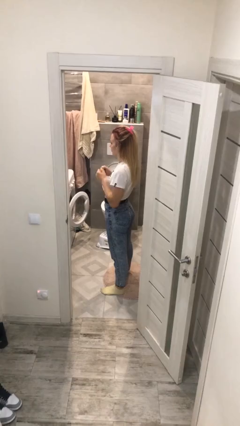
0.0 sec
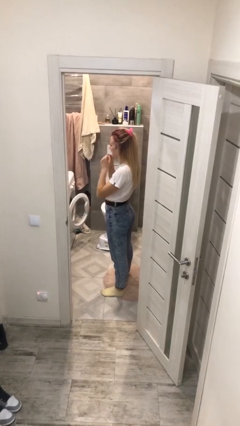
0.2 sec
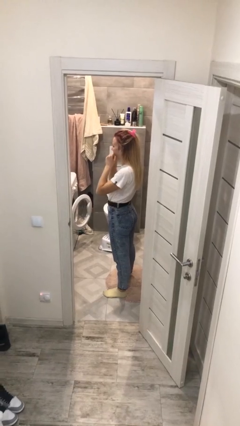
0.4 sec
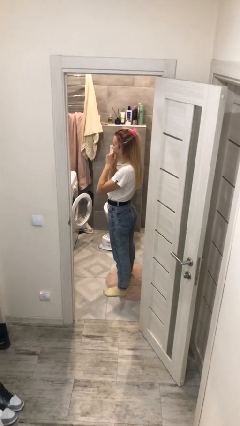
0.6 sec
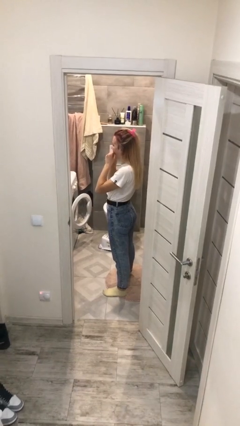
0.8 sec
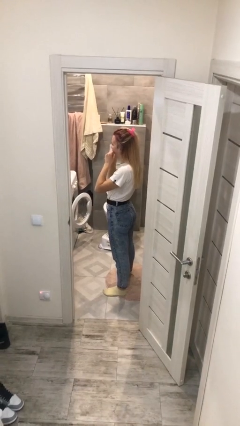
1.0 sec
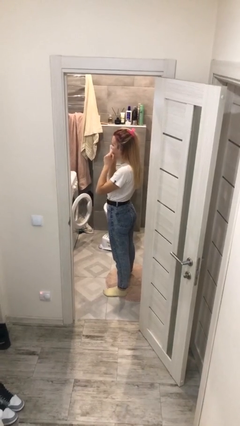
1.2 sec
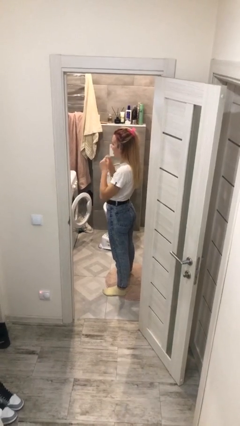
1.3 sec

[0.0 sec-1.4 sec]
person flosses

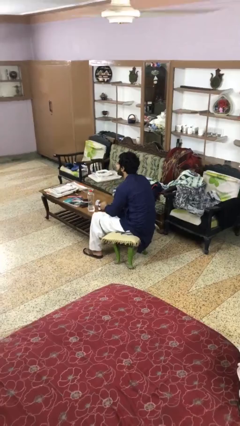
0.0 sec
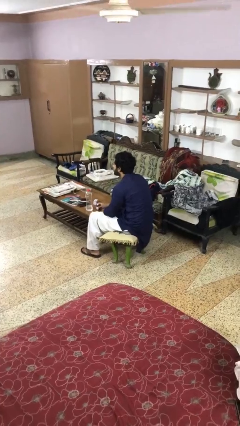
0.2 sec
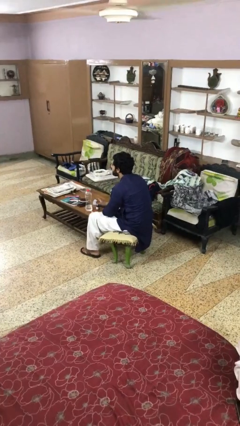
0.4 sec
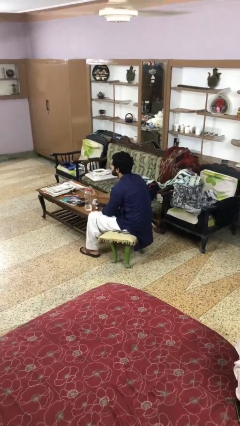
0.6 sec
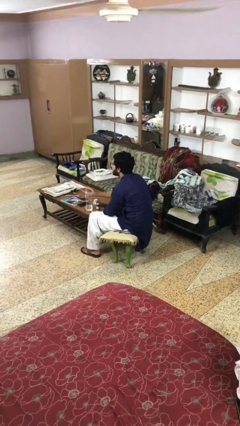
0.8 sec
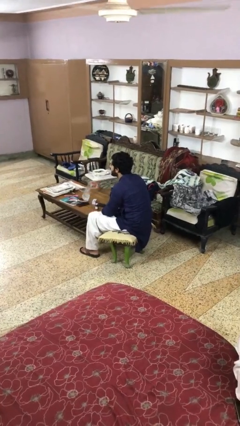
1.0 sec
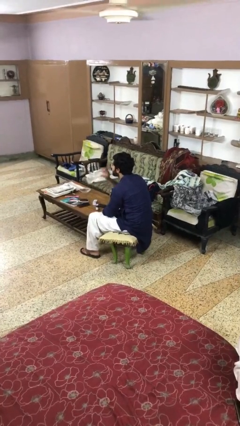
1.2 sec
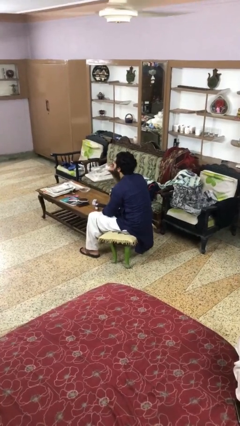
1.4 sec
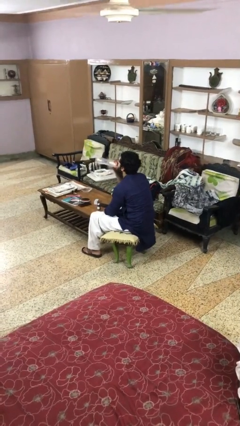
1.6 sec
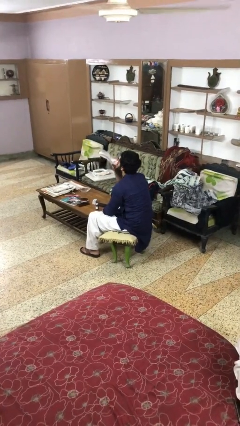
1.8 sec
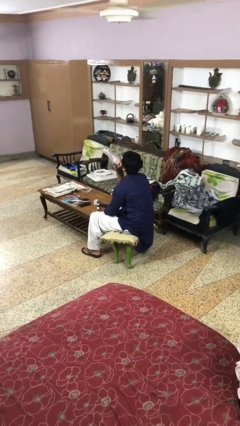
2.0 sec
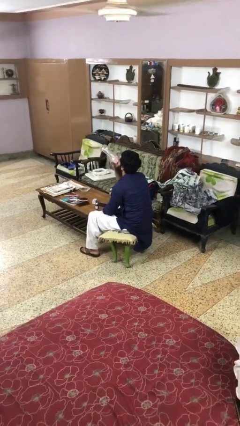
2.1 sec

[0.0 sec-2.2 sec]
person drinks from cup

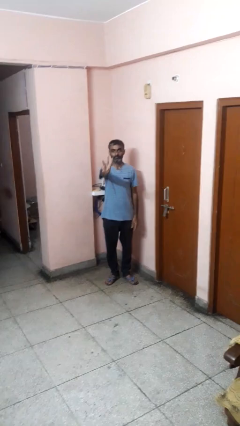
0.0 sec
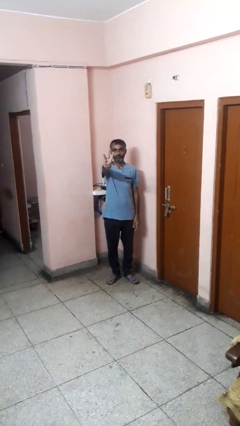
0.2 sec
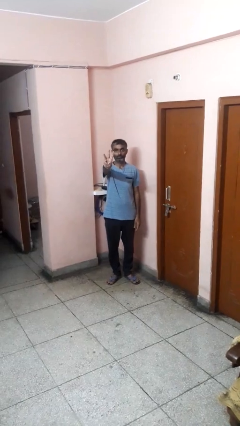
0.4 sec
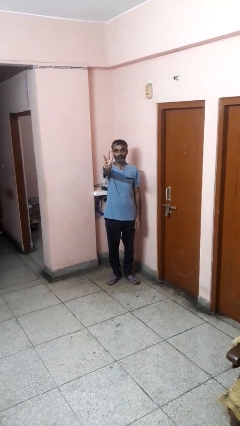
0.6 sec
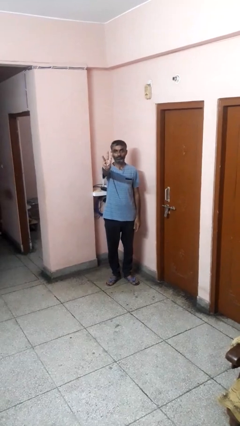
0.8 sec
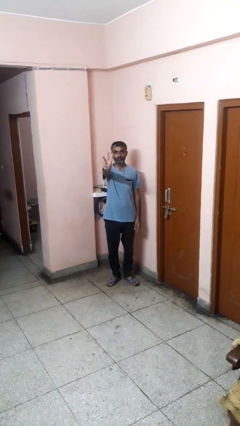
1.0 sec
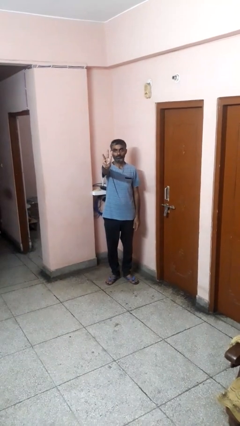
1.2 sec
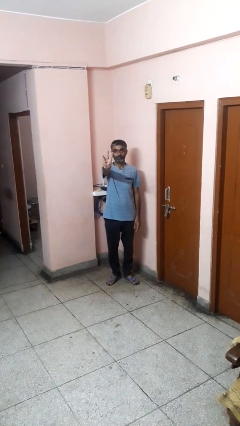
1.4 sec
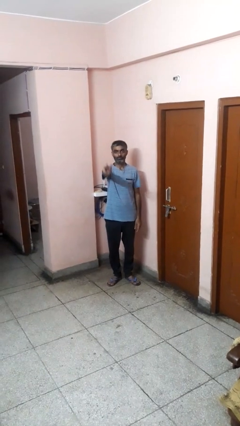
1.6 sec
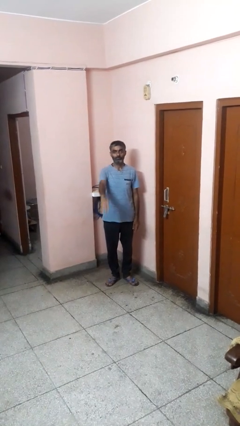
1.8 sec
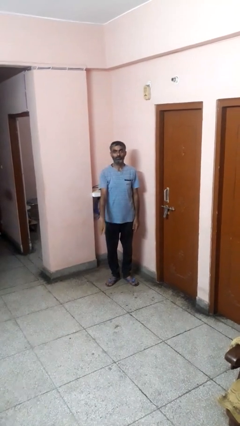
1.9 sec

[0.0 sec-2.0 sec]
person gestures number three

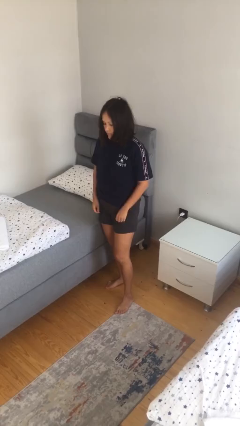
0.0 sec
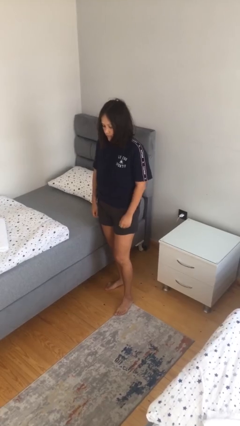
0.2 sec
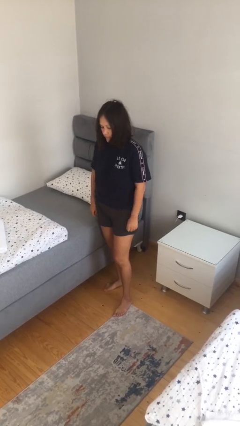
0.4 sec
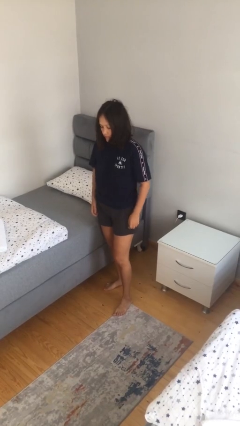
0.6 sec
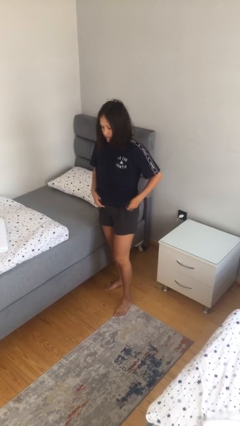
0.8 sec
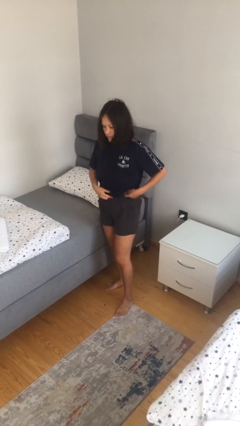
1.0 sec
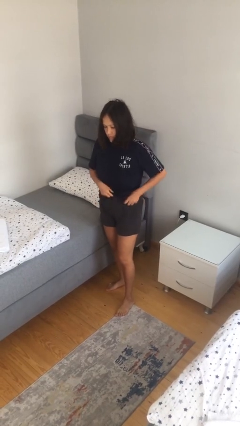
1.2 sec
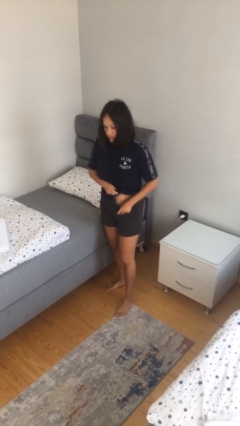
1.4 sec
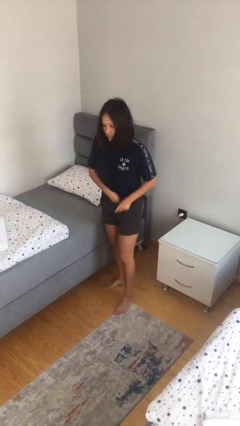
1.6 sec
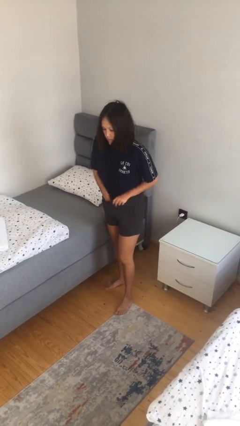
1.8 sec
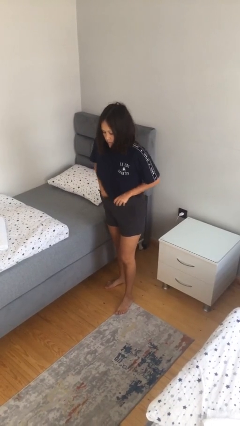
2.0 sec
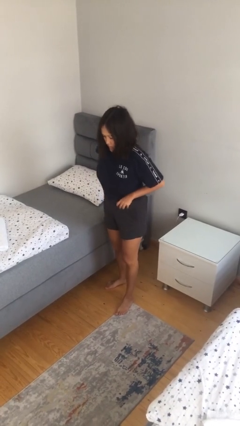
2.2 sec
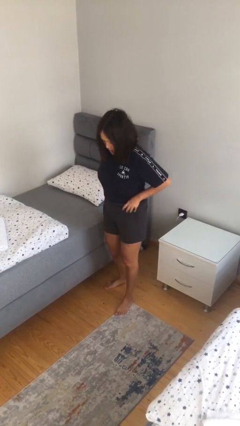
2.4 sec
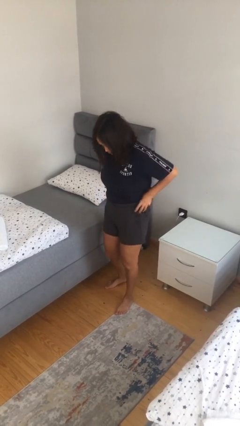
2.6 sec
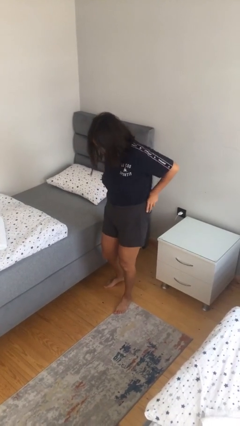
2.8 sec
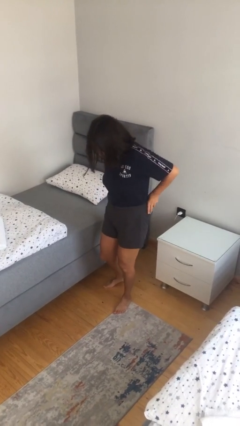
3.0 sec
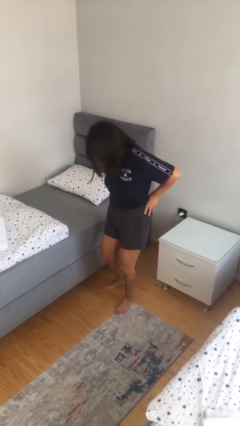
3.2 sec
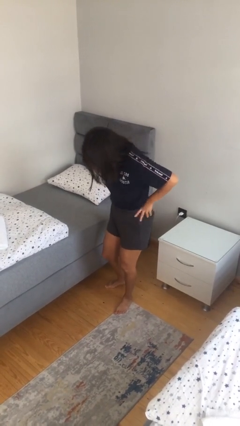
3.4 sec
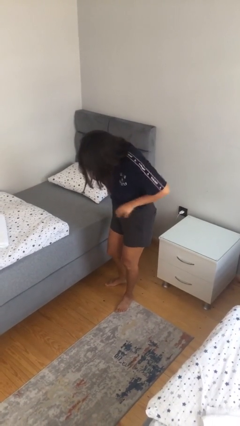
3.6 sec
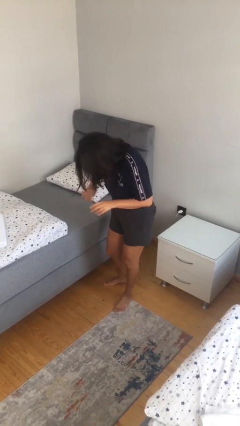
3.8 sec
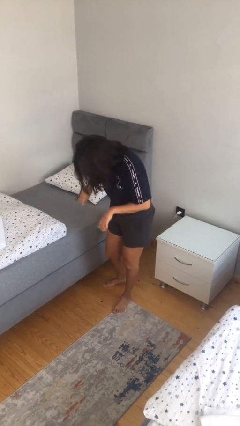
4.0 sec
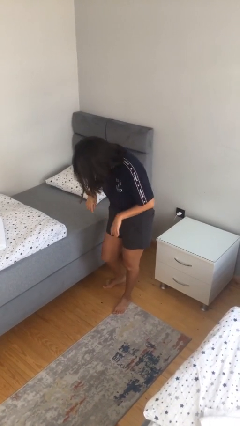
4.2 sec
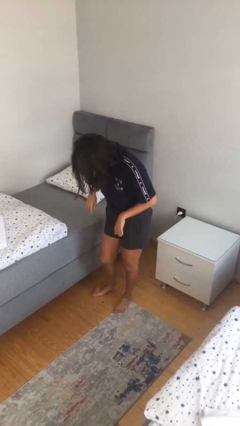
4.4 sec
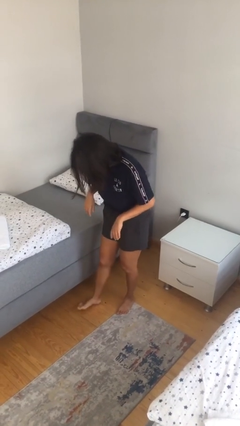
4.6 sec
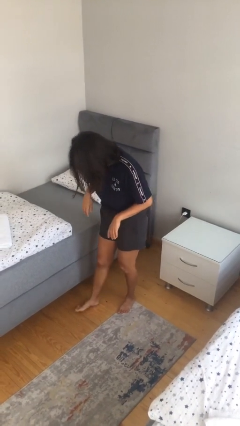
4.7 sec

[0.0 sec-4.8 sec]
person tucks in shirt

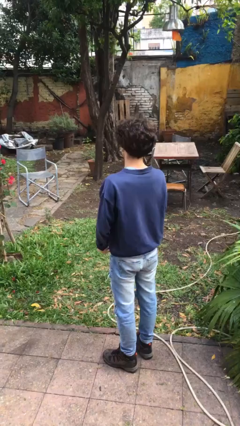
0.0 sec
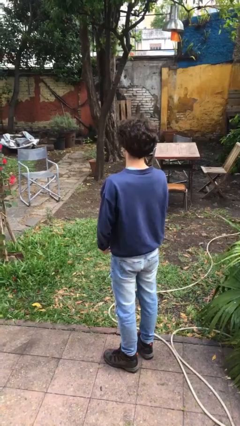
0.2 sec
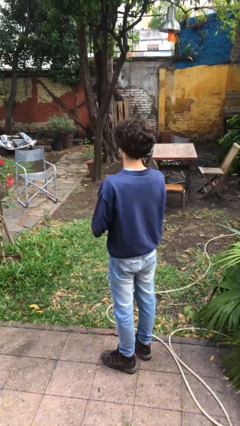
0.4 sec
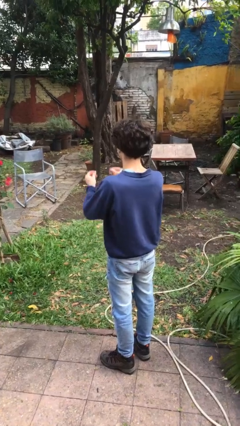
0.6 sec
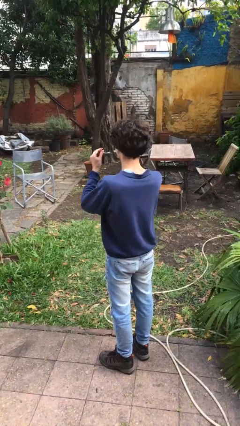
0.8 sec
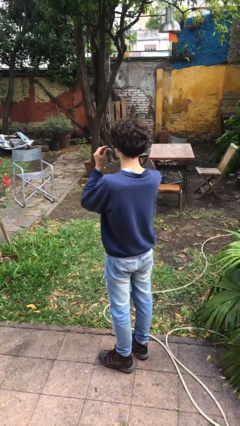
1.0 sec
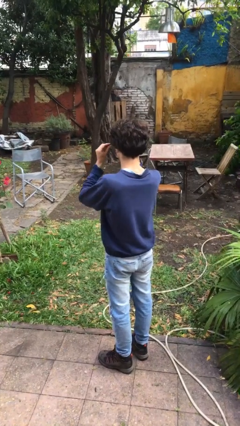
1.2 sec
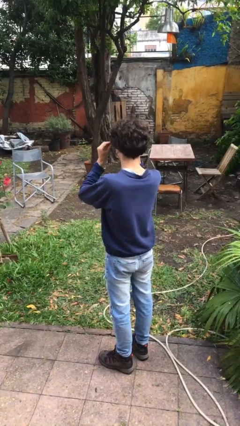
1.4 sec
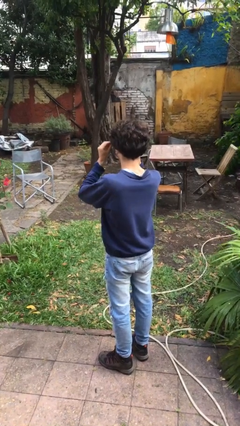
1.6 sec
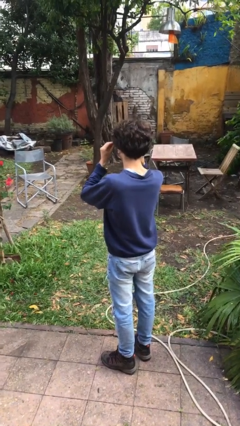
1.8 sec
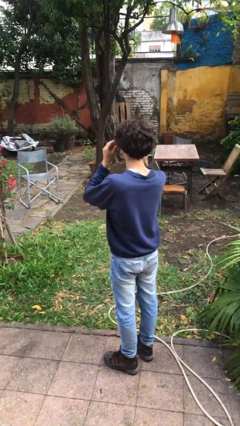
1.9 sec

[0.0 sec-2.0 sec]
person puts on glasses

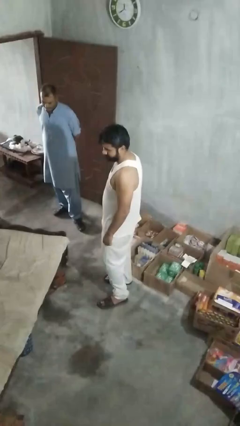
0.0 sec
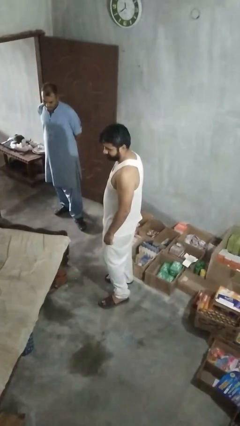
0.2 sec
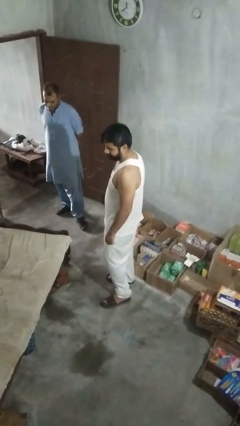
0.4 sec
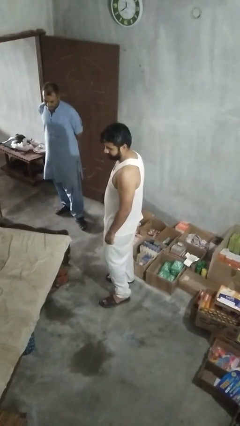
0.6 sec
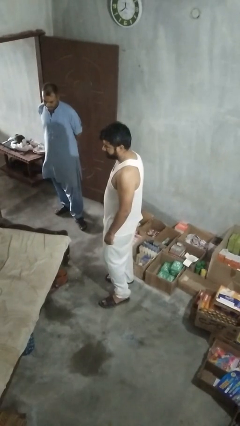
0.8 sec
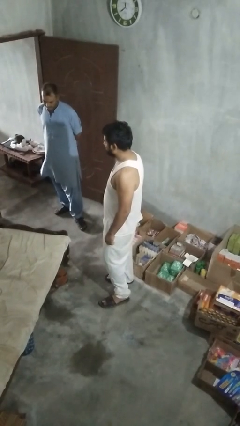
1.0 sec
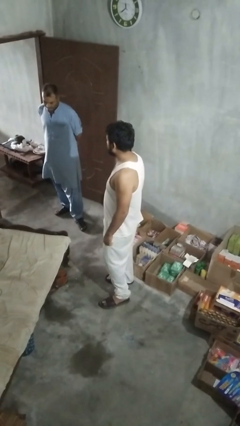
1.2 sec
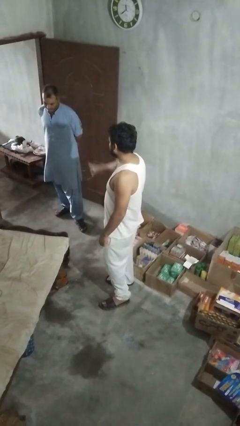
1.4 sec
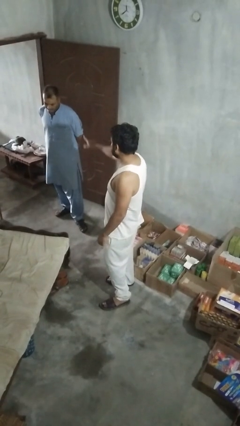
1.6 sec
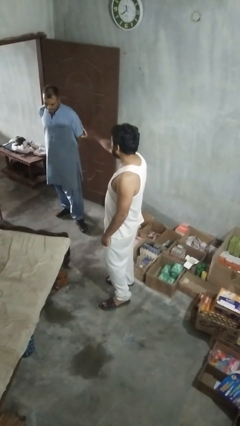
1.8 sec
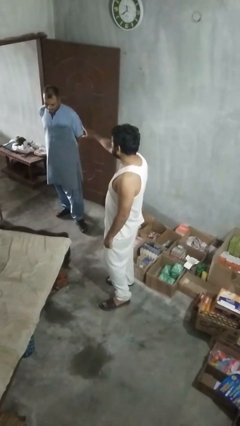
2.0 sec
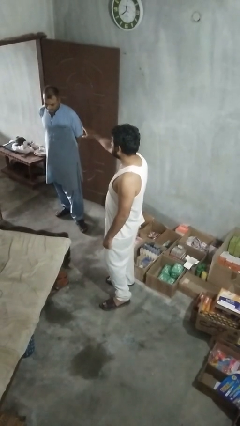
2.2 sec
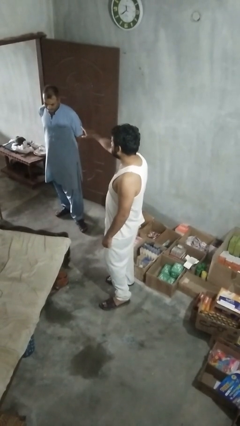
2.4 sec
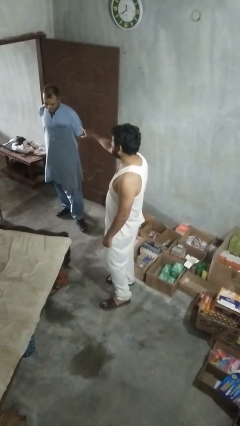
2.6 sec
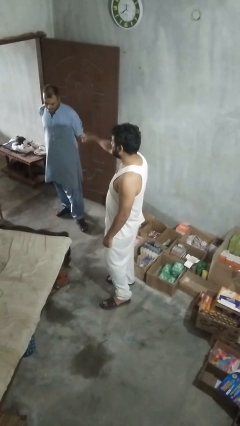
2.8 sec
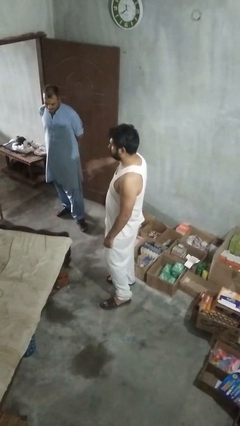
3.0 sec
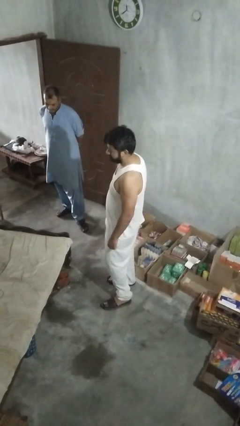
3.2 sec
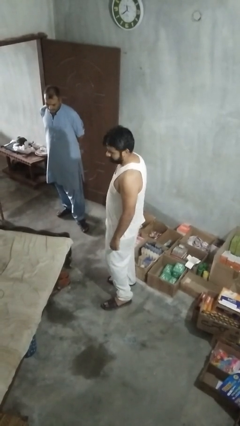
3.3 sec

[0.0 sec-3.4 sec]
person points at person

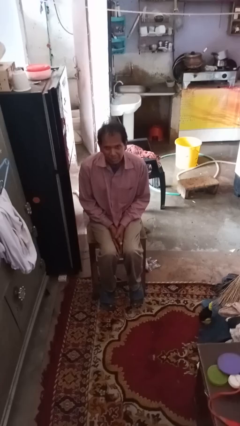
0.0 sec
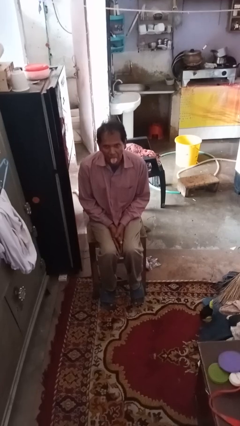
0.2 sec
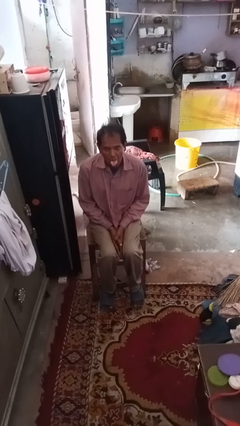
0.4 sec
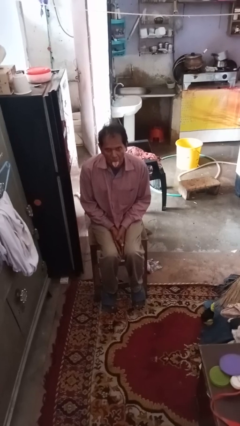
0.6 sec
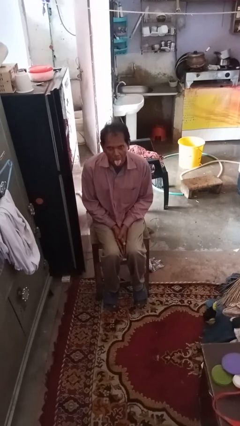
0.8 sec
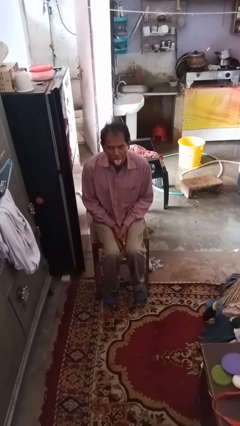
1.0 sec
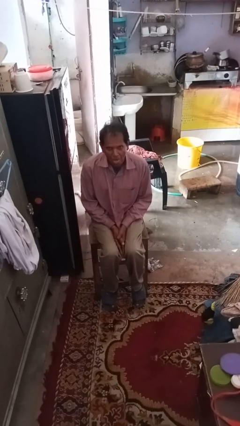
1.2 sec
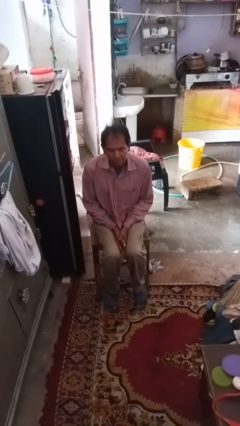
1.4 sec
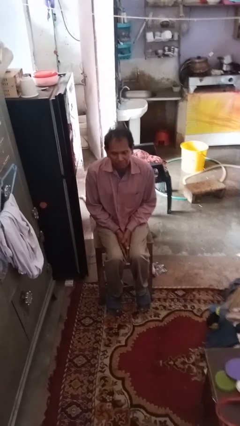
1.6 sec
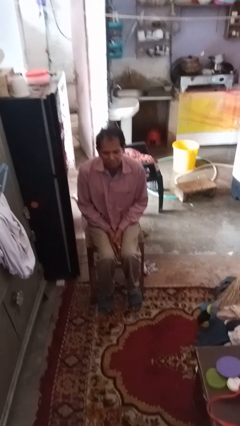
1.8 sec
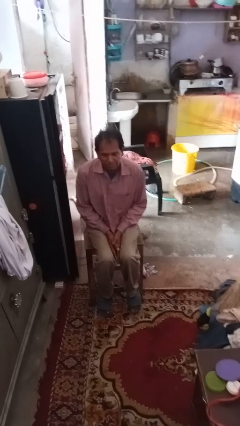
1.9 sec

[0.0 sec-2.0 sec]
person sticks out tongue
